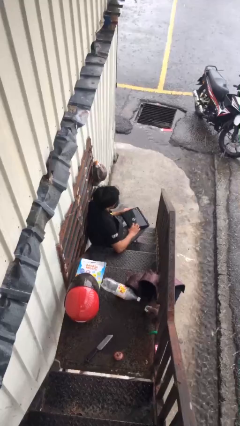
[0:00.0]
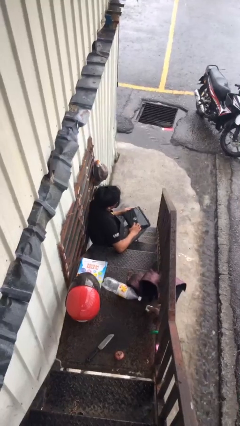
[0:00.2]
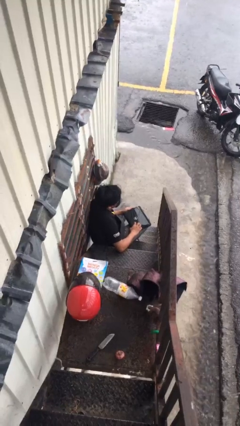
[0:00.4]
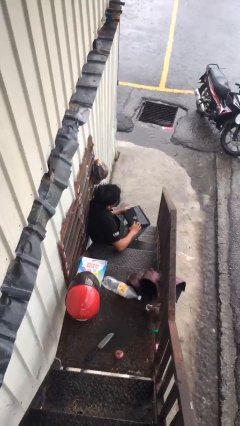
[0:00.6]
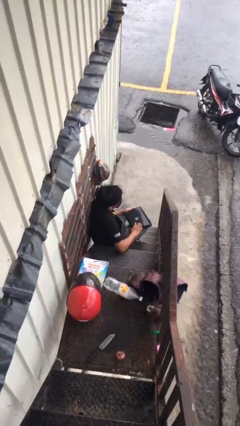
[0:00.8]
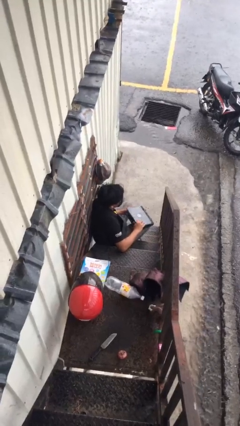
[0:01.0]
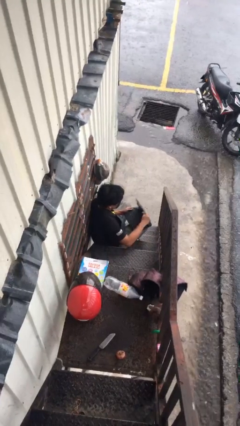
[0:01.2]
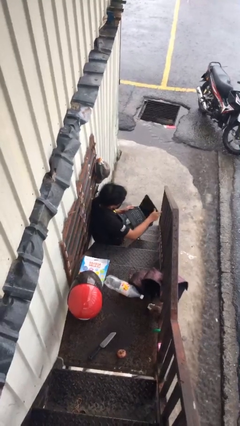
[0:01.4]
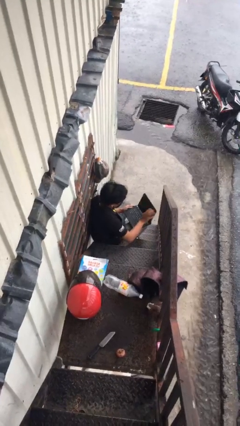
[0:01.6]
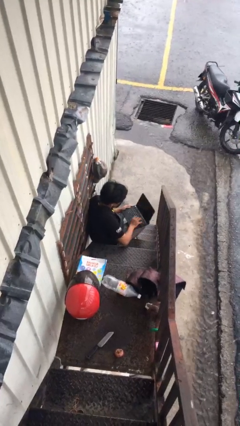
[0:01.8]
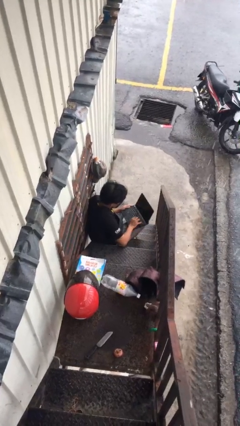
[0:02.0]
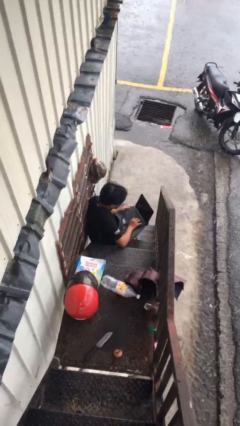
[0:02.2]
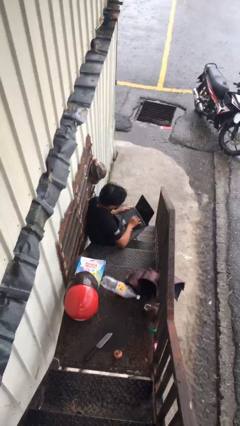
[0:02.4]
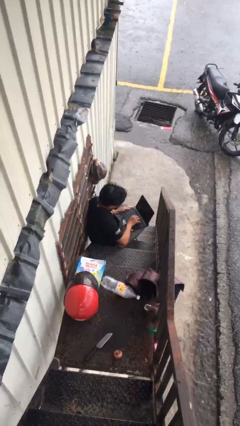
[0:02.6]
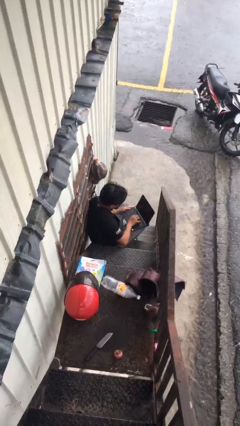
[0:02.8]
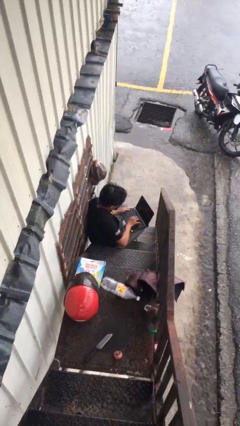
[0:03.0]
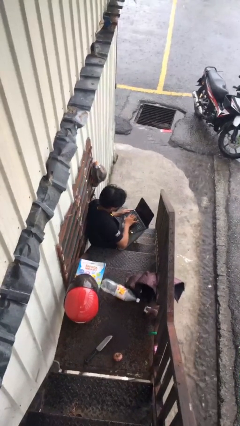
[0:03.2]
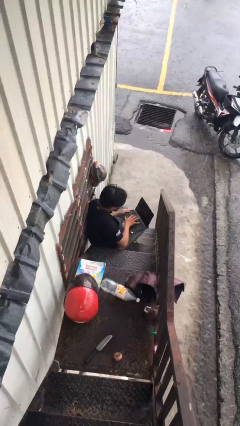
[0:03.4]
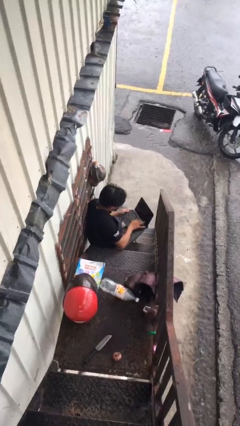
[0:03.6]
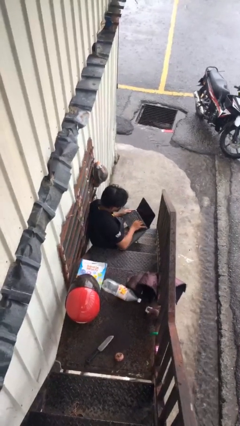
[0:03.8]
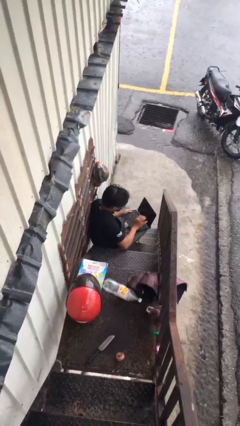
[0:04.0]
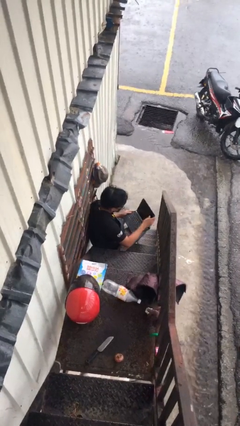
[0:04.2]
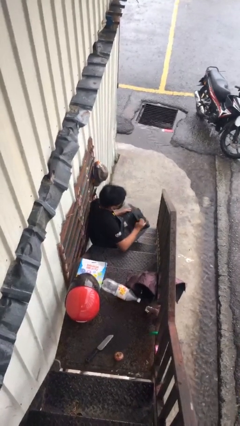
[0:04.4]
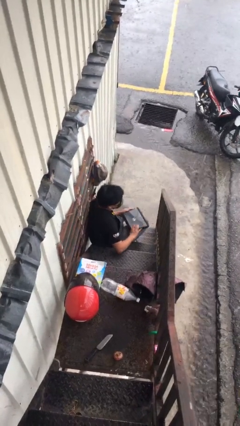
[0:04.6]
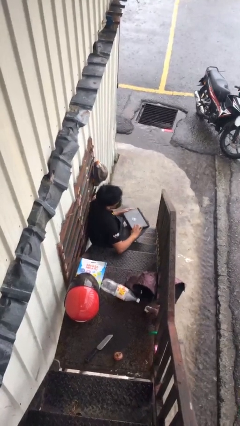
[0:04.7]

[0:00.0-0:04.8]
person interacts with laptop

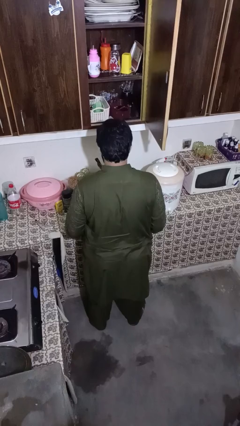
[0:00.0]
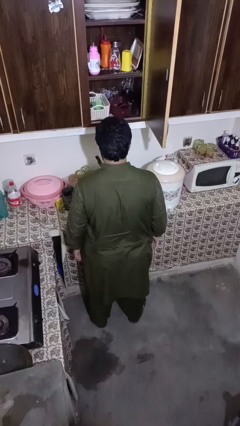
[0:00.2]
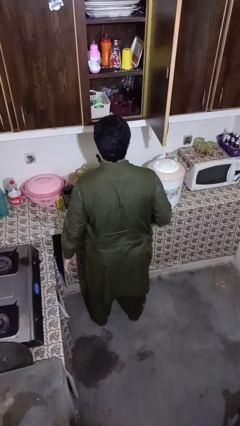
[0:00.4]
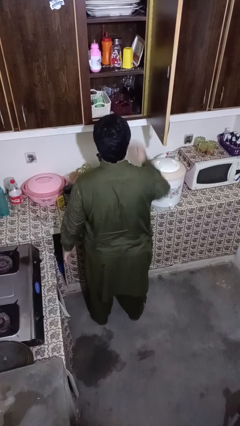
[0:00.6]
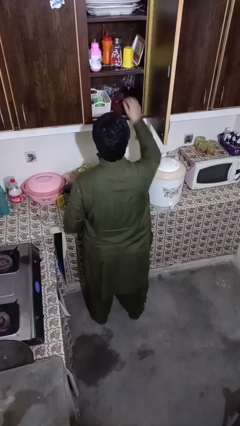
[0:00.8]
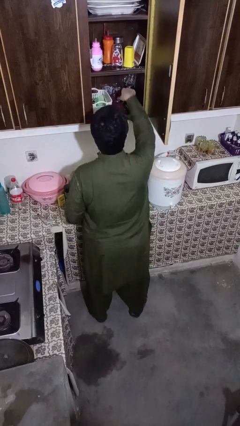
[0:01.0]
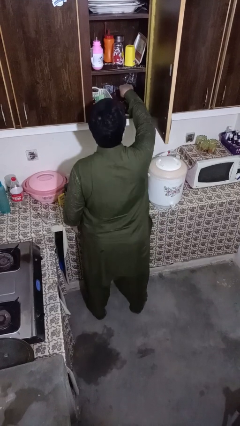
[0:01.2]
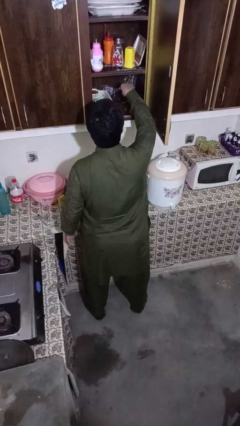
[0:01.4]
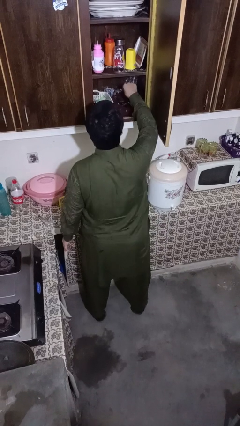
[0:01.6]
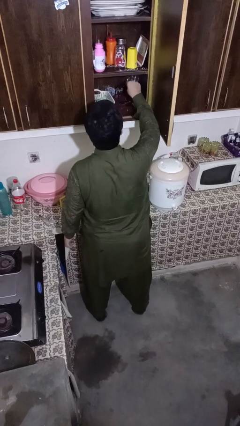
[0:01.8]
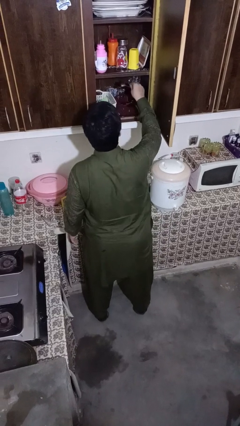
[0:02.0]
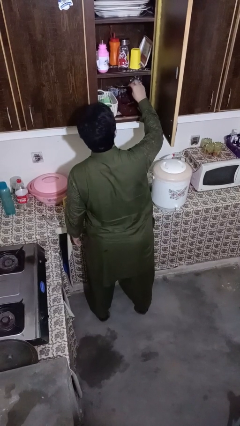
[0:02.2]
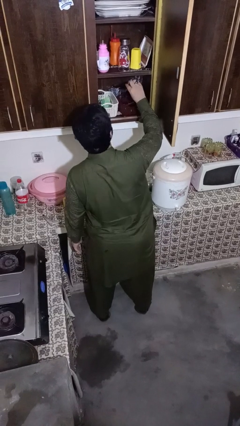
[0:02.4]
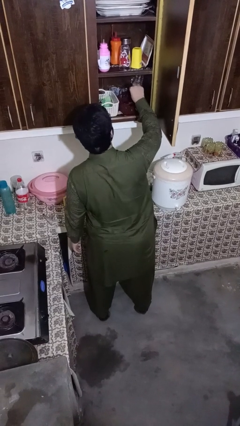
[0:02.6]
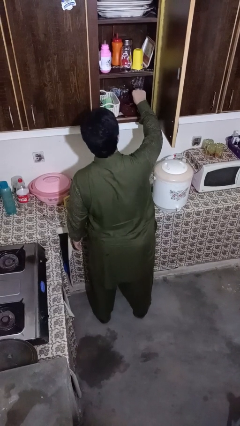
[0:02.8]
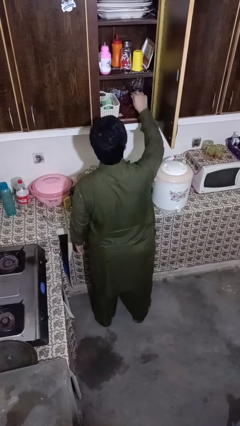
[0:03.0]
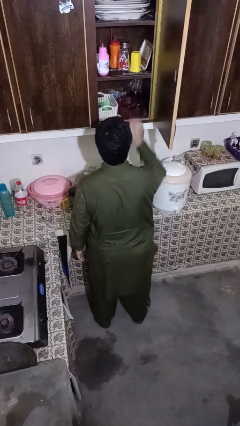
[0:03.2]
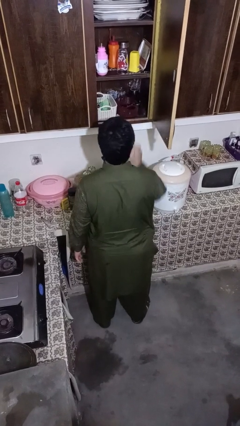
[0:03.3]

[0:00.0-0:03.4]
person searches in kitchen drawer

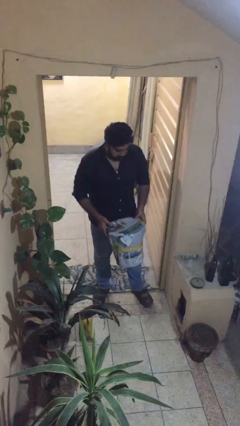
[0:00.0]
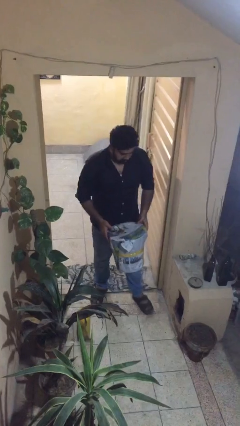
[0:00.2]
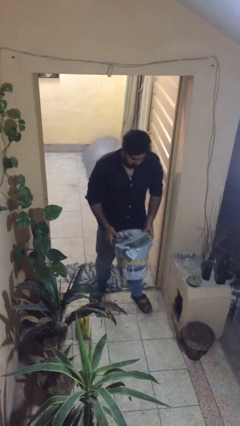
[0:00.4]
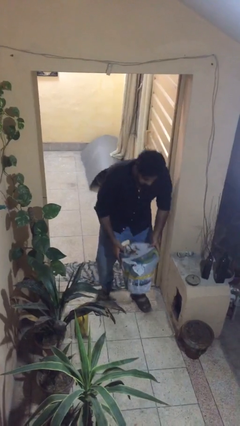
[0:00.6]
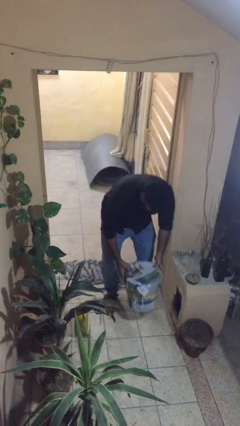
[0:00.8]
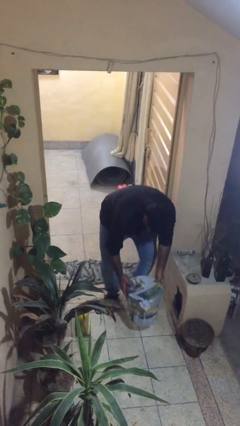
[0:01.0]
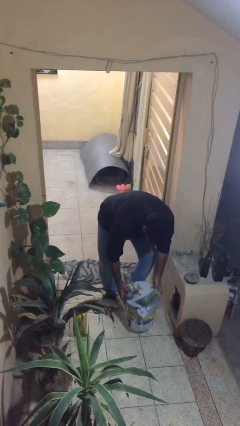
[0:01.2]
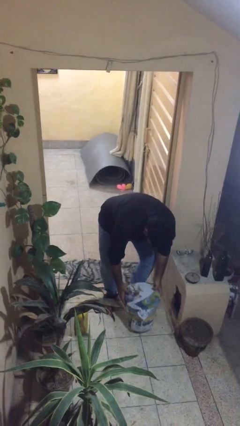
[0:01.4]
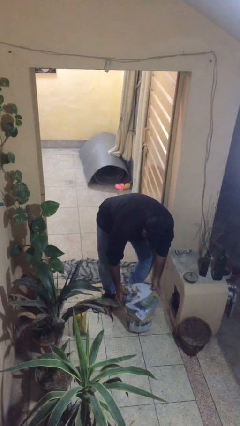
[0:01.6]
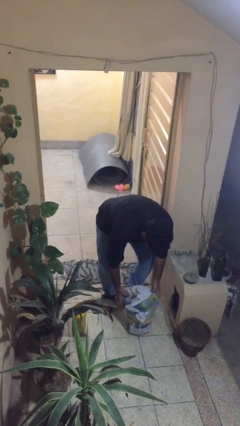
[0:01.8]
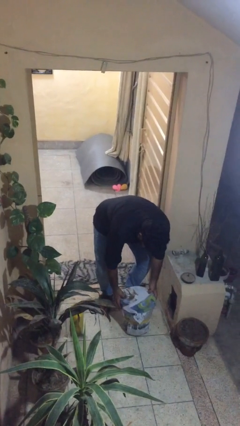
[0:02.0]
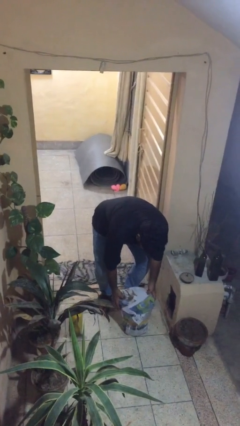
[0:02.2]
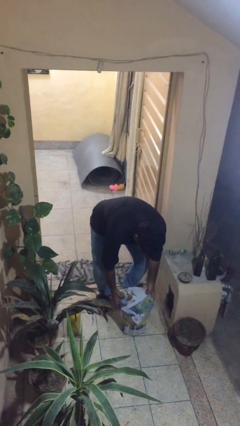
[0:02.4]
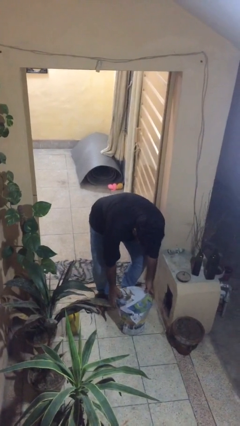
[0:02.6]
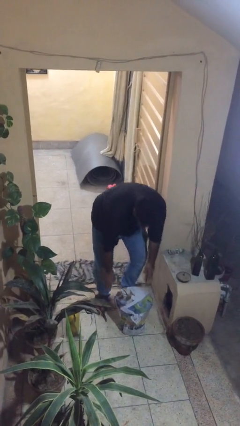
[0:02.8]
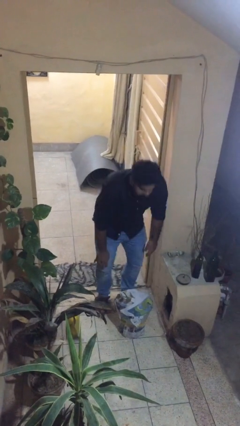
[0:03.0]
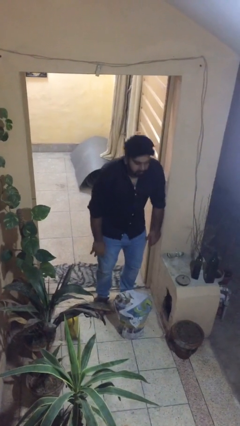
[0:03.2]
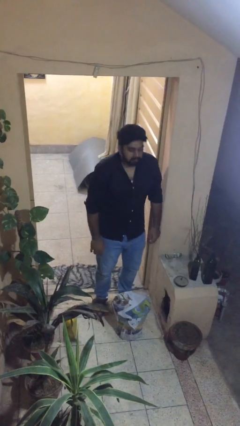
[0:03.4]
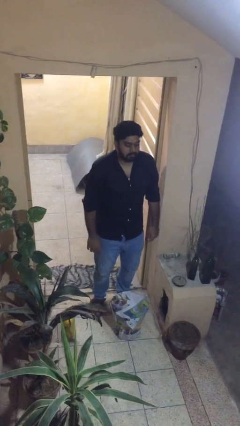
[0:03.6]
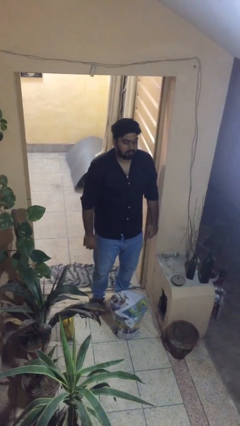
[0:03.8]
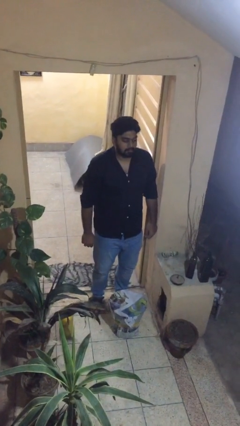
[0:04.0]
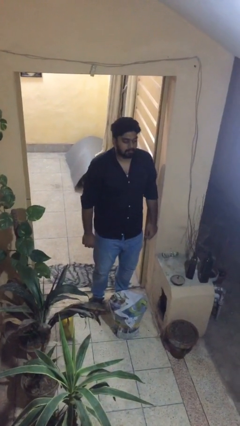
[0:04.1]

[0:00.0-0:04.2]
person puts down object on floor

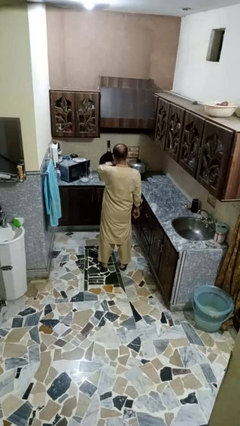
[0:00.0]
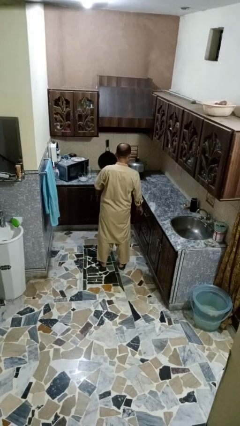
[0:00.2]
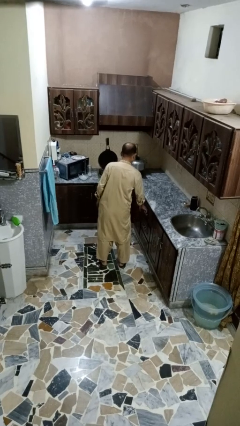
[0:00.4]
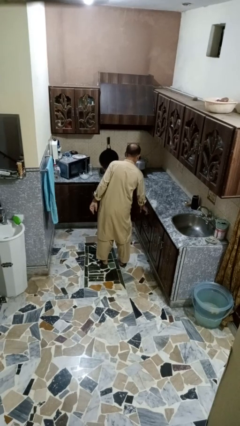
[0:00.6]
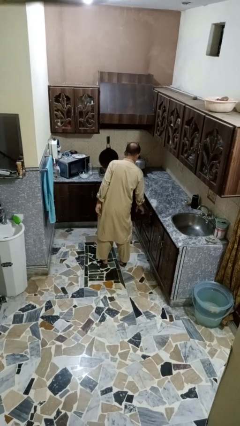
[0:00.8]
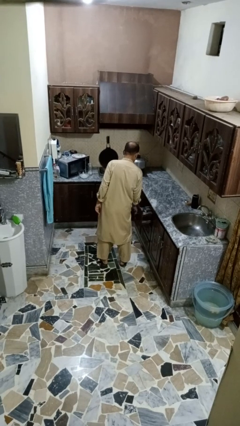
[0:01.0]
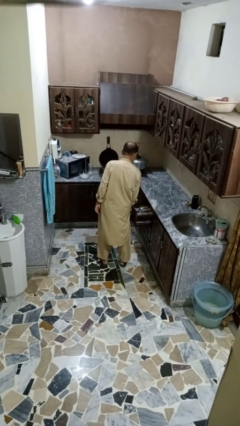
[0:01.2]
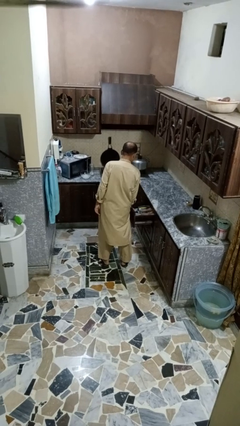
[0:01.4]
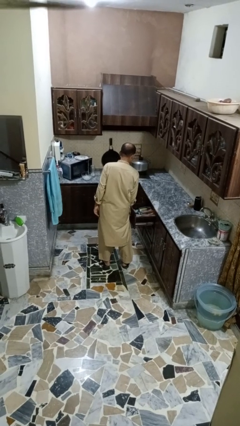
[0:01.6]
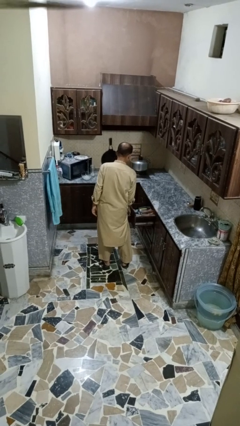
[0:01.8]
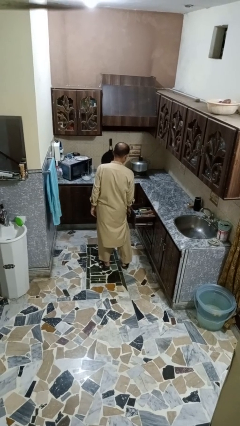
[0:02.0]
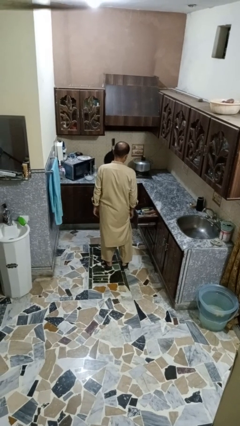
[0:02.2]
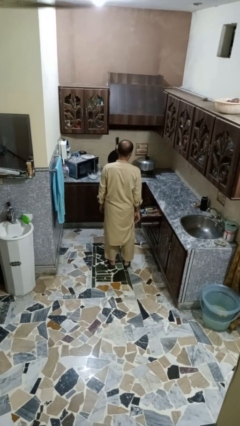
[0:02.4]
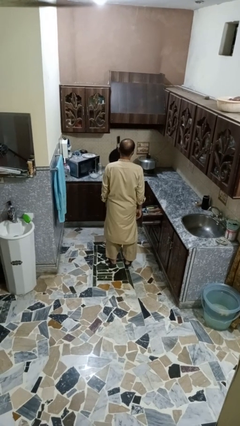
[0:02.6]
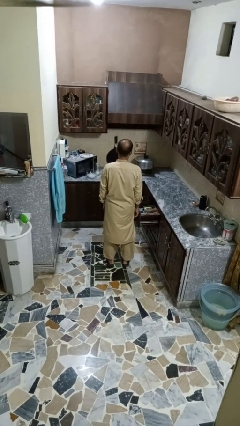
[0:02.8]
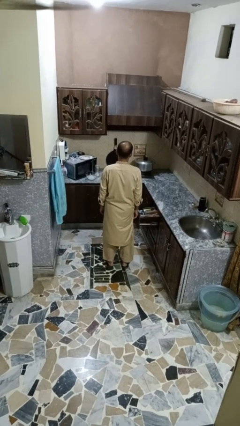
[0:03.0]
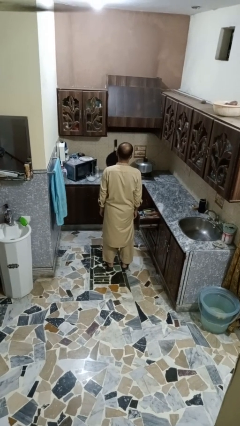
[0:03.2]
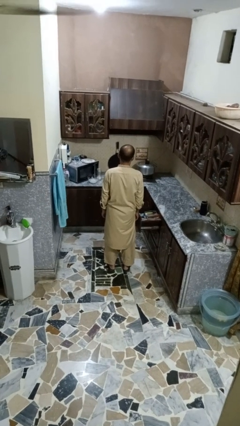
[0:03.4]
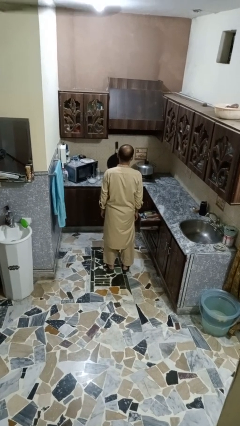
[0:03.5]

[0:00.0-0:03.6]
person opens kitchen drawer

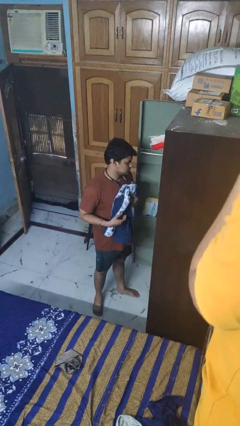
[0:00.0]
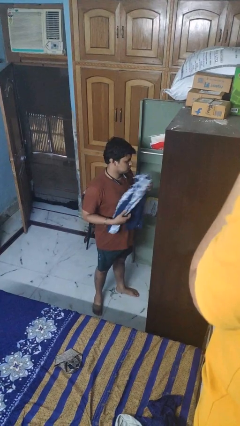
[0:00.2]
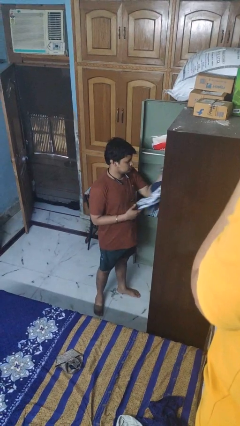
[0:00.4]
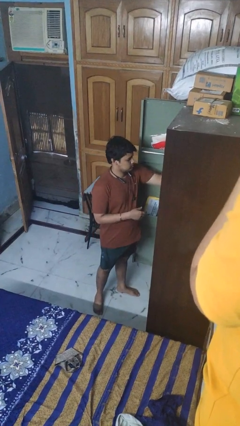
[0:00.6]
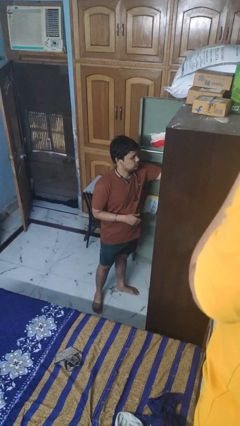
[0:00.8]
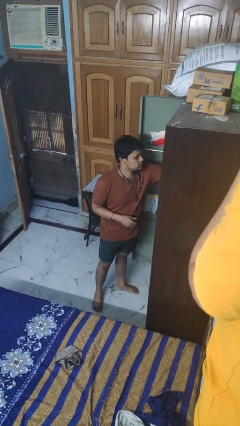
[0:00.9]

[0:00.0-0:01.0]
person puts clothes into dresser

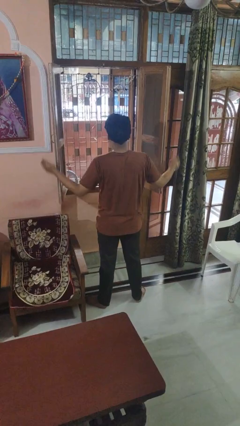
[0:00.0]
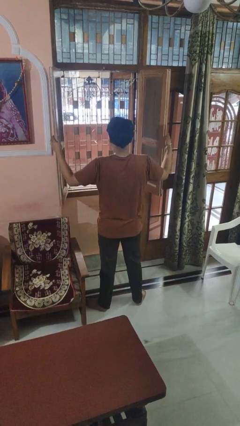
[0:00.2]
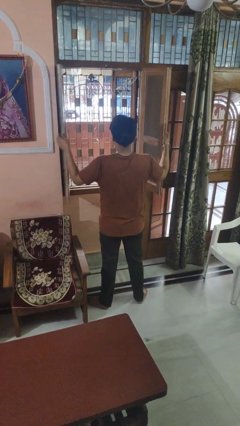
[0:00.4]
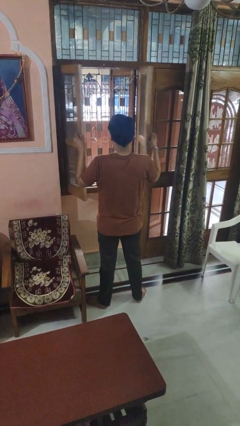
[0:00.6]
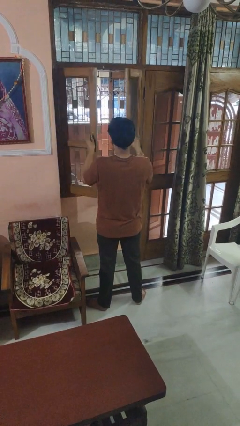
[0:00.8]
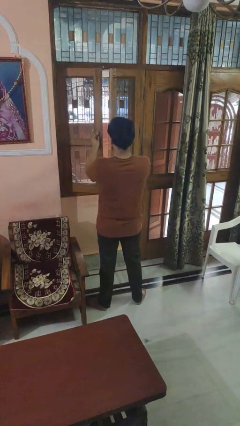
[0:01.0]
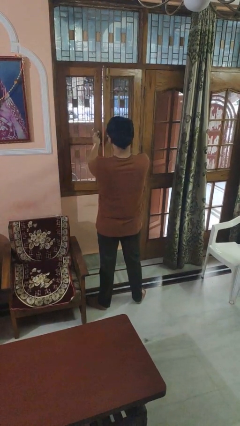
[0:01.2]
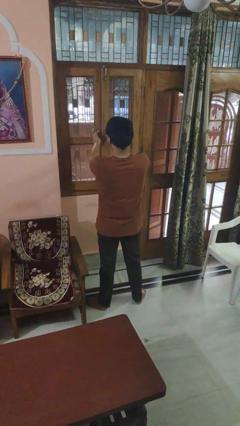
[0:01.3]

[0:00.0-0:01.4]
person closes home window
